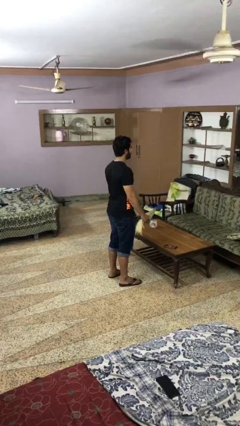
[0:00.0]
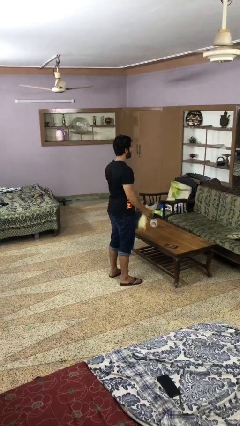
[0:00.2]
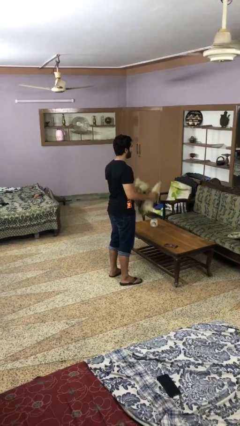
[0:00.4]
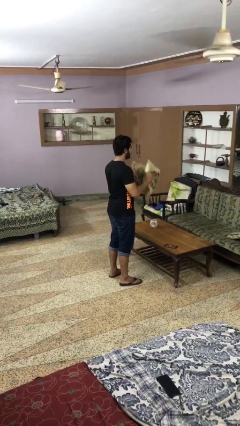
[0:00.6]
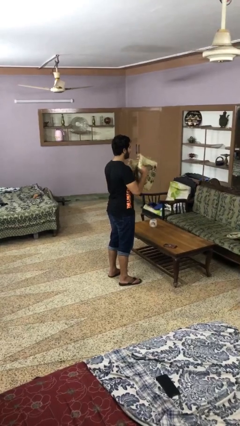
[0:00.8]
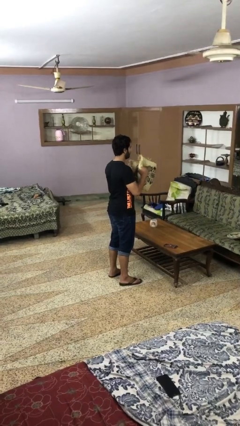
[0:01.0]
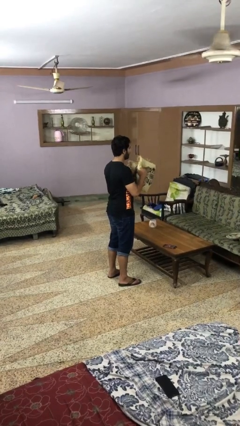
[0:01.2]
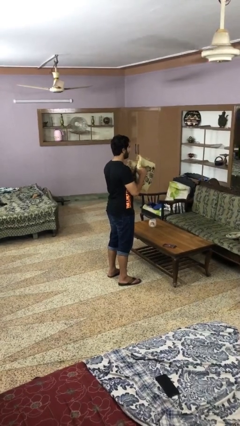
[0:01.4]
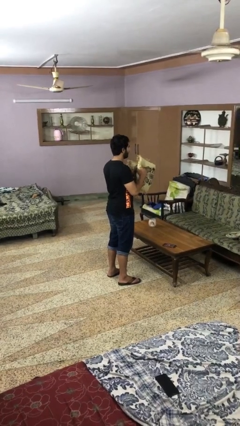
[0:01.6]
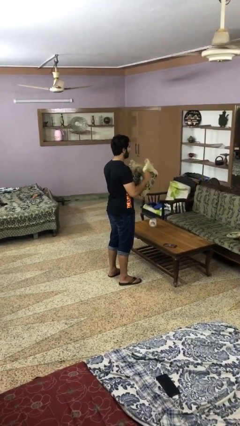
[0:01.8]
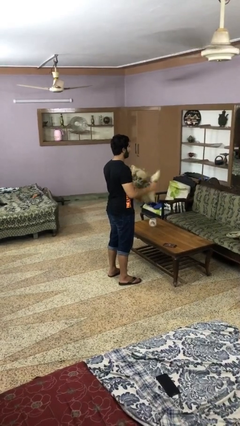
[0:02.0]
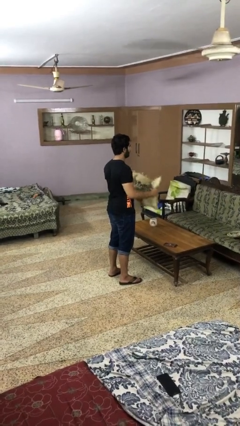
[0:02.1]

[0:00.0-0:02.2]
person squeezes object

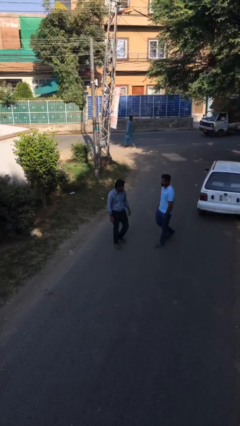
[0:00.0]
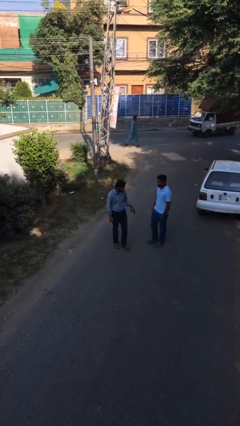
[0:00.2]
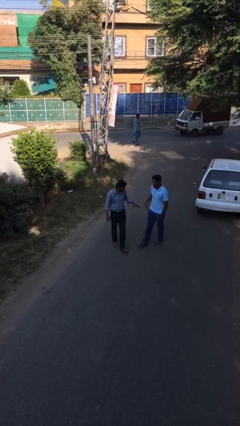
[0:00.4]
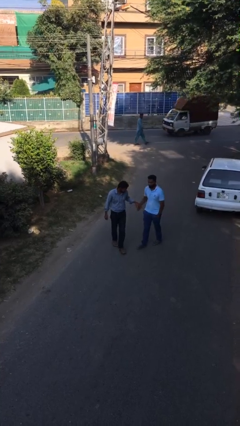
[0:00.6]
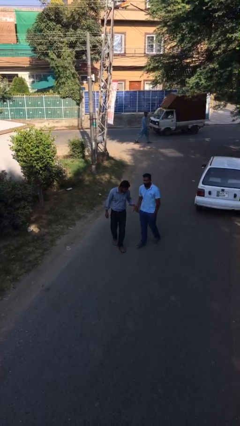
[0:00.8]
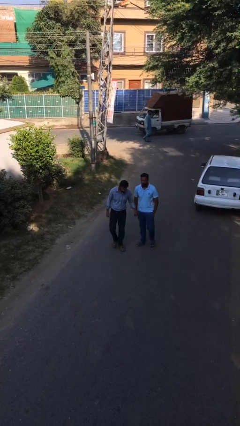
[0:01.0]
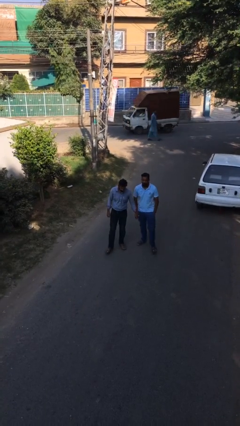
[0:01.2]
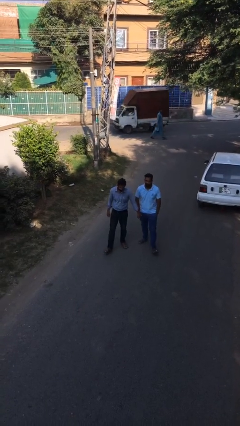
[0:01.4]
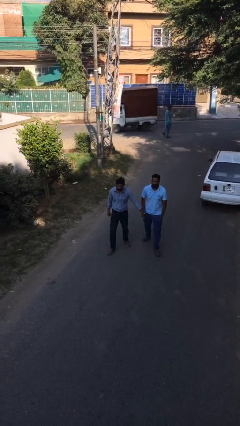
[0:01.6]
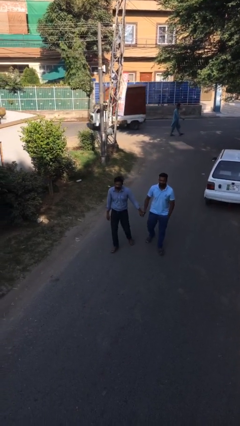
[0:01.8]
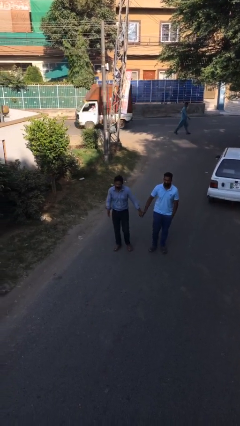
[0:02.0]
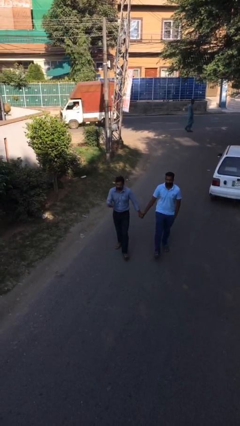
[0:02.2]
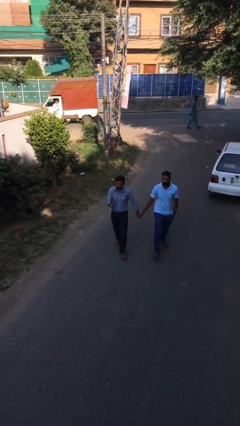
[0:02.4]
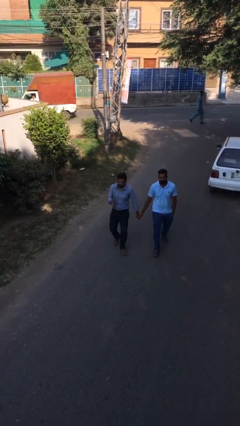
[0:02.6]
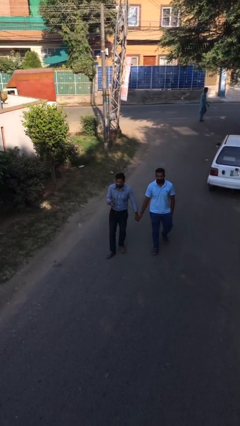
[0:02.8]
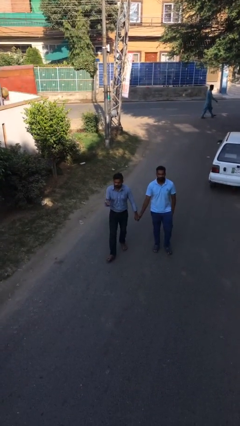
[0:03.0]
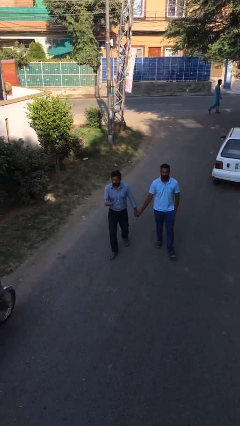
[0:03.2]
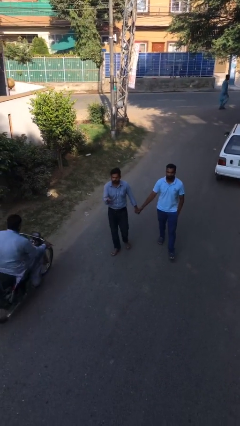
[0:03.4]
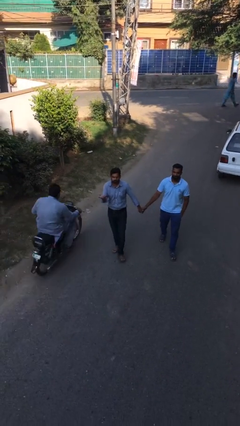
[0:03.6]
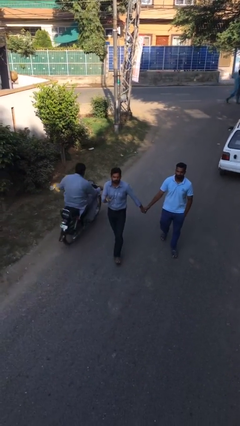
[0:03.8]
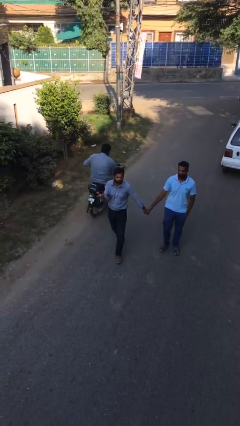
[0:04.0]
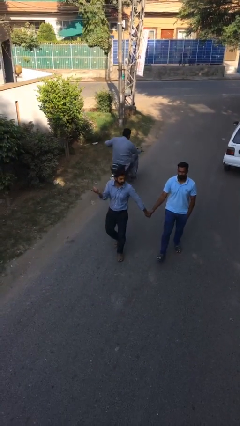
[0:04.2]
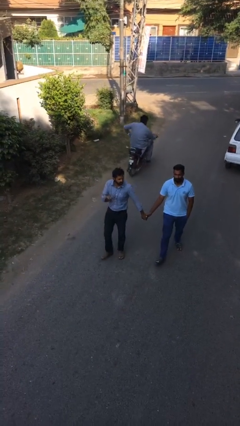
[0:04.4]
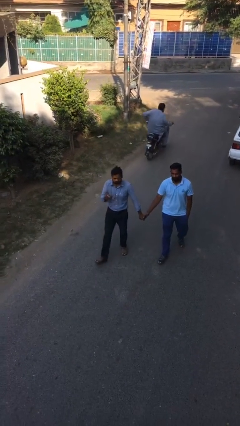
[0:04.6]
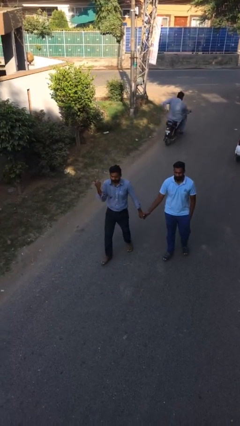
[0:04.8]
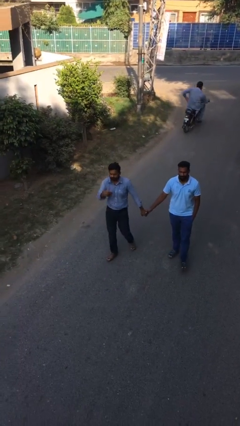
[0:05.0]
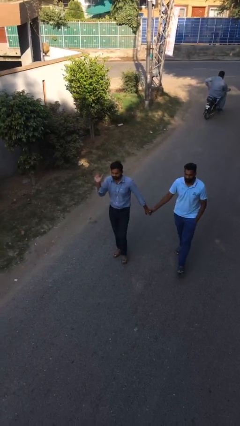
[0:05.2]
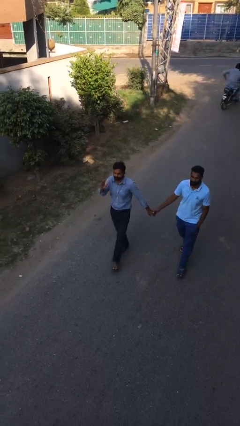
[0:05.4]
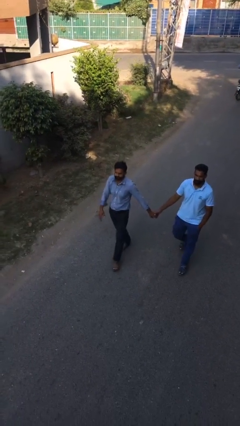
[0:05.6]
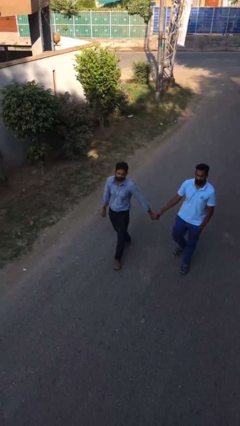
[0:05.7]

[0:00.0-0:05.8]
person holds hand

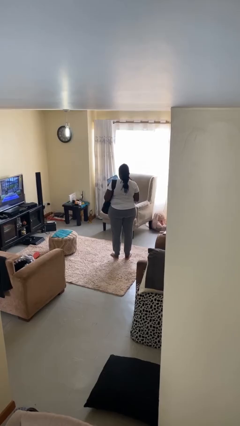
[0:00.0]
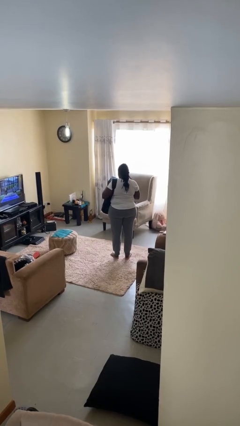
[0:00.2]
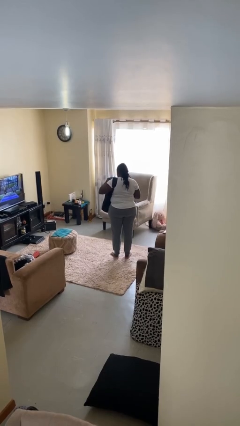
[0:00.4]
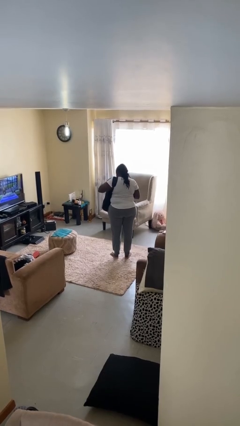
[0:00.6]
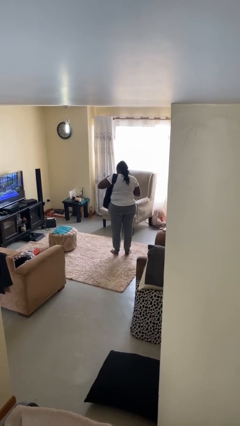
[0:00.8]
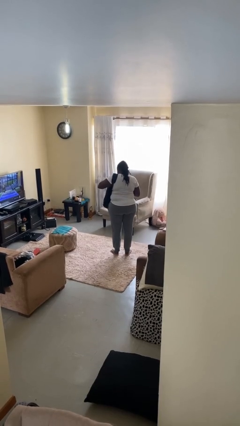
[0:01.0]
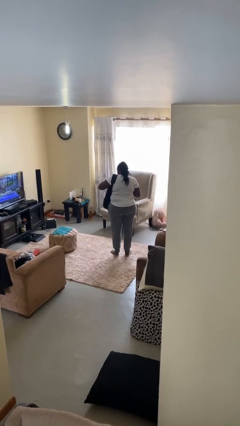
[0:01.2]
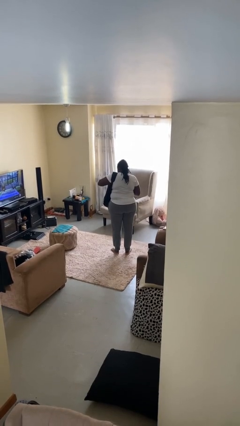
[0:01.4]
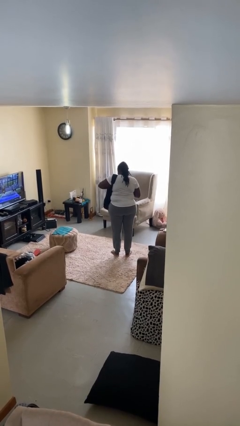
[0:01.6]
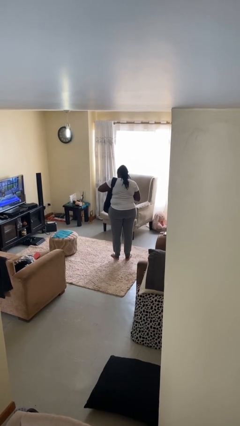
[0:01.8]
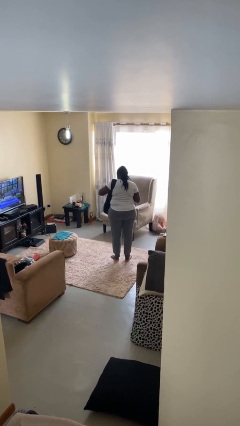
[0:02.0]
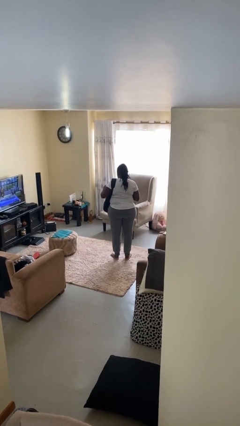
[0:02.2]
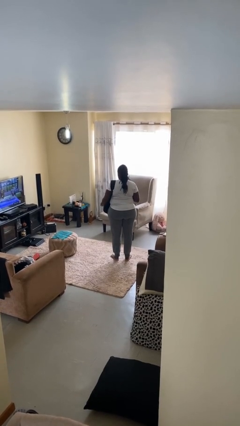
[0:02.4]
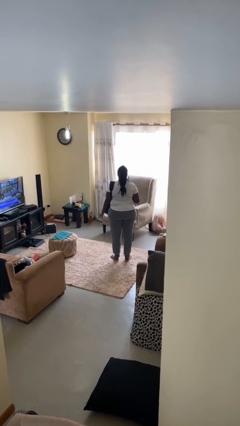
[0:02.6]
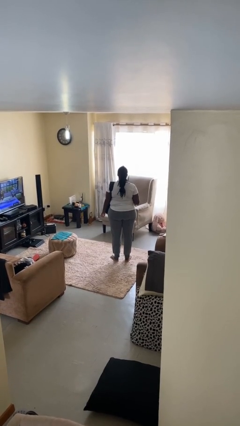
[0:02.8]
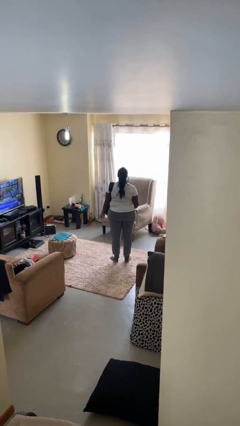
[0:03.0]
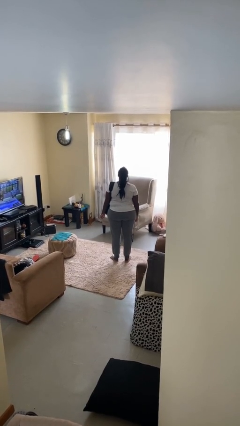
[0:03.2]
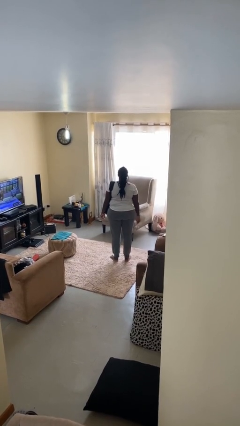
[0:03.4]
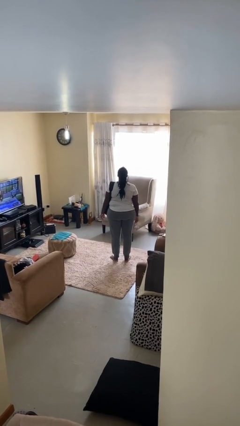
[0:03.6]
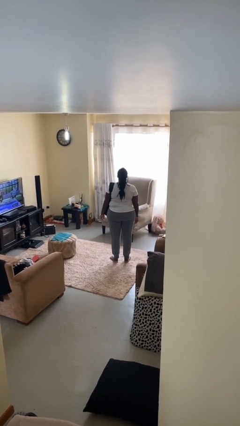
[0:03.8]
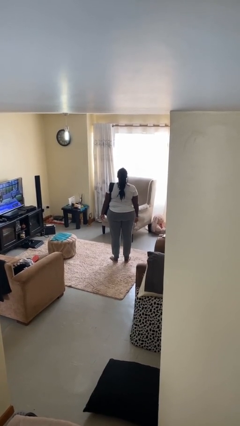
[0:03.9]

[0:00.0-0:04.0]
person puts object into backpack

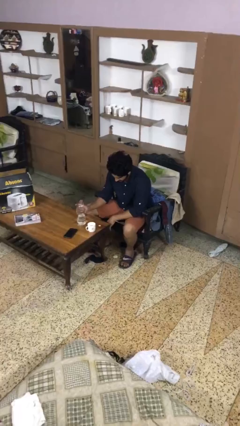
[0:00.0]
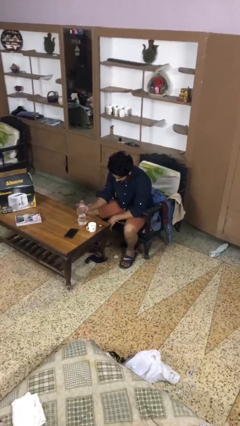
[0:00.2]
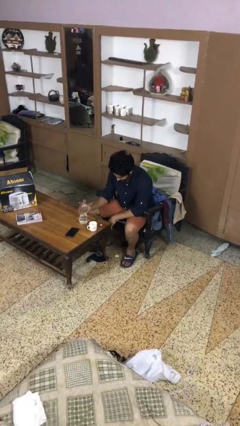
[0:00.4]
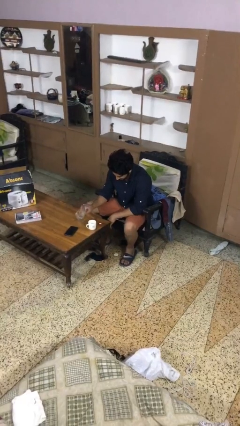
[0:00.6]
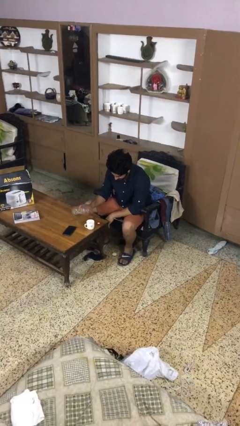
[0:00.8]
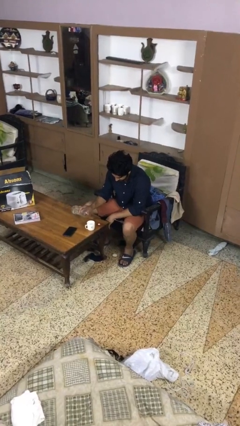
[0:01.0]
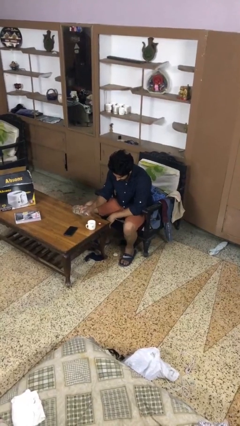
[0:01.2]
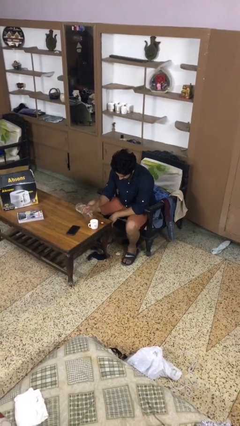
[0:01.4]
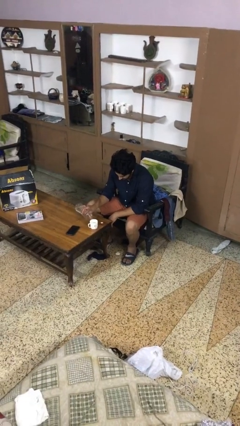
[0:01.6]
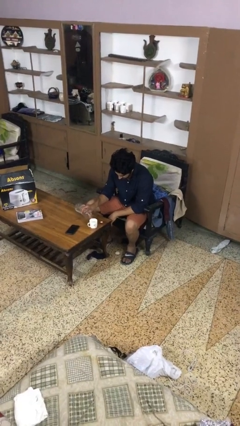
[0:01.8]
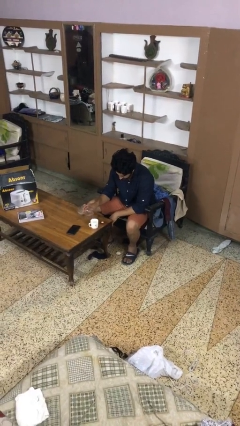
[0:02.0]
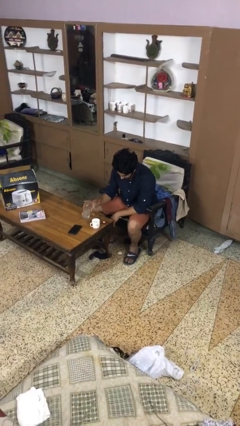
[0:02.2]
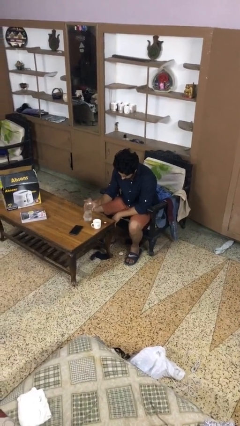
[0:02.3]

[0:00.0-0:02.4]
person pours liquid into cup

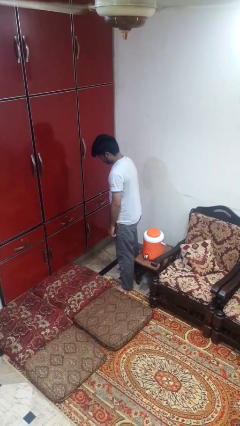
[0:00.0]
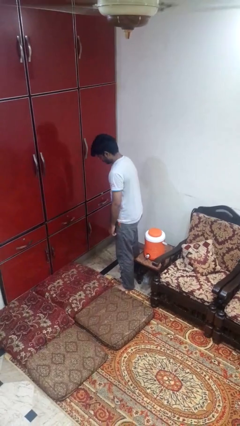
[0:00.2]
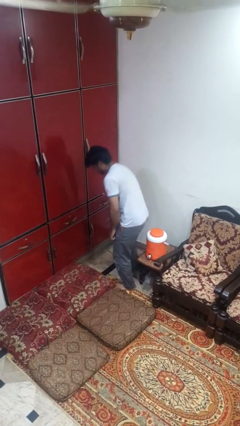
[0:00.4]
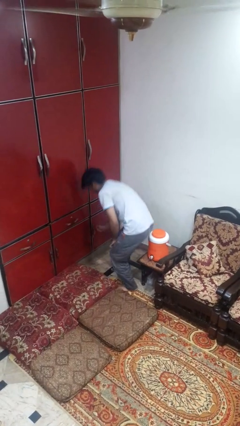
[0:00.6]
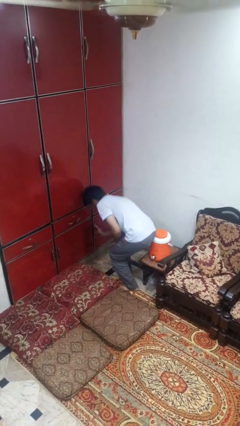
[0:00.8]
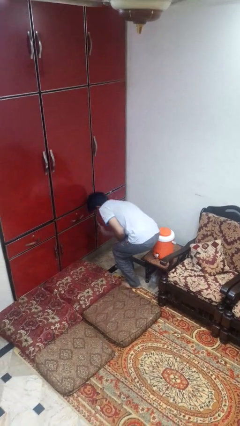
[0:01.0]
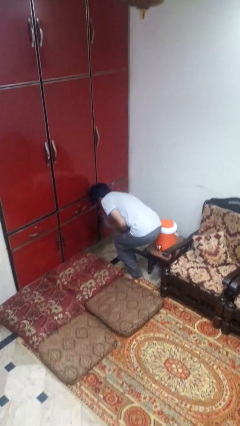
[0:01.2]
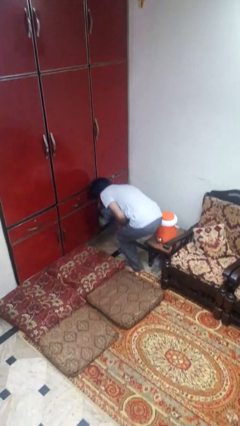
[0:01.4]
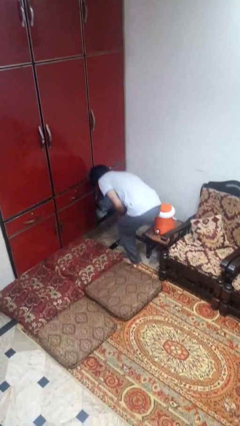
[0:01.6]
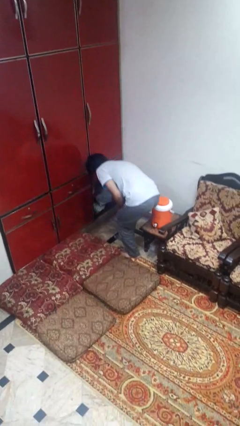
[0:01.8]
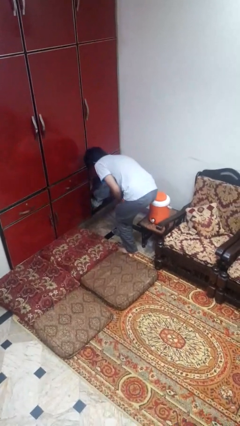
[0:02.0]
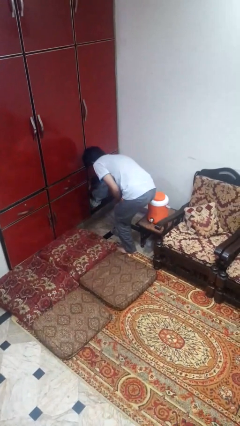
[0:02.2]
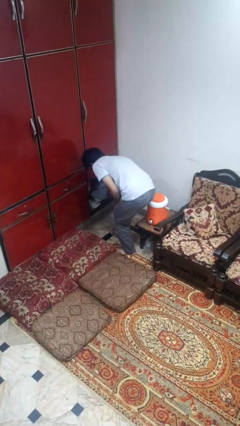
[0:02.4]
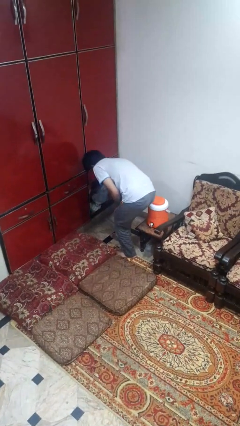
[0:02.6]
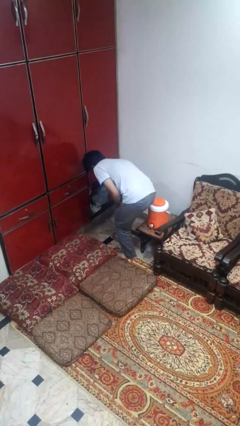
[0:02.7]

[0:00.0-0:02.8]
person closes cabinet
